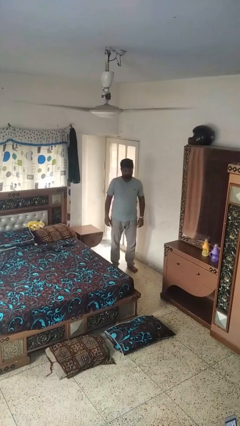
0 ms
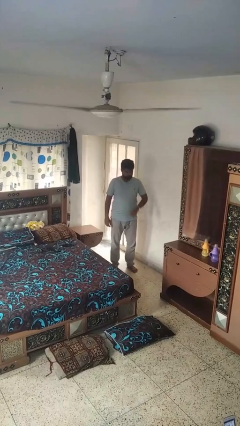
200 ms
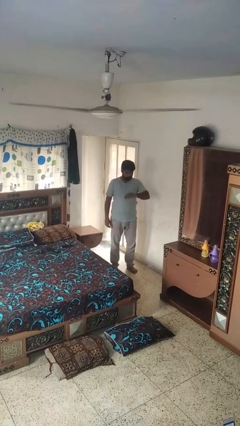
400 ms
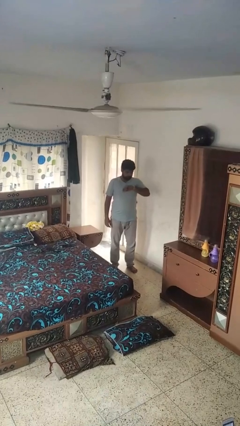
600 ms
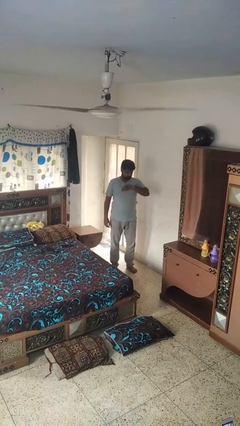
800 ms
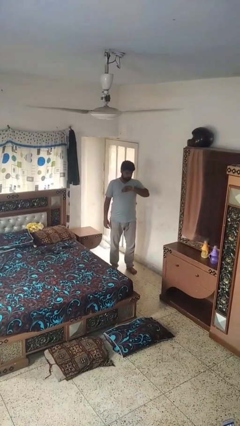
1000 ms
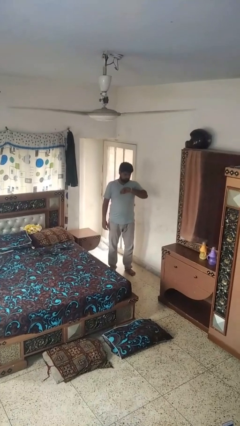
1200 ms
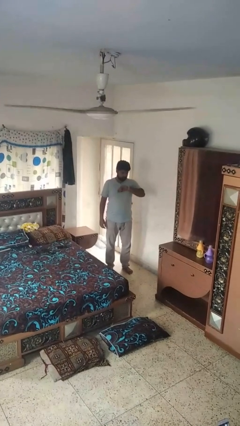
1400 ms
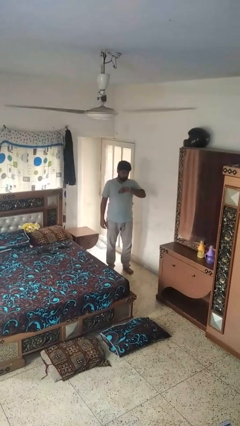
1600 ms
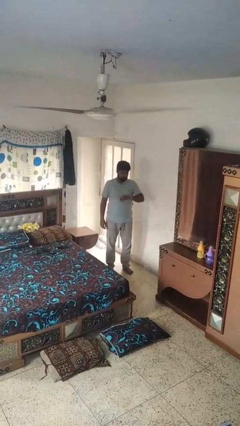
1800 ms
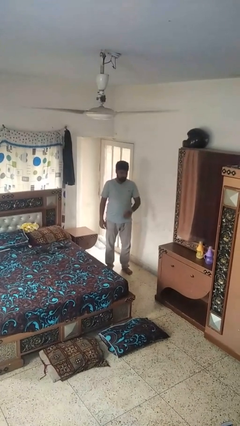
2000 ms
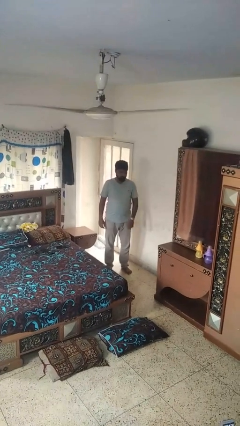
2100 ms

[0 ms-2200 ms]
person looks at wristwatch

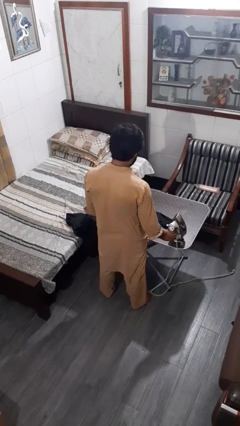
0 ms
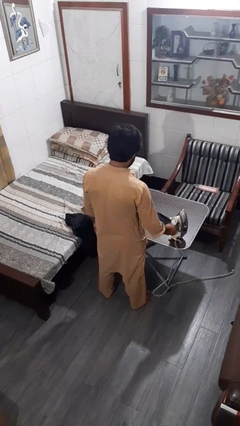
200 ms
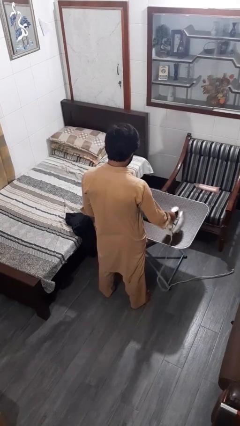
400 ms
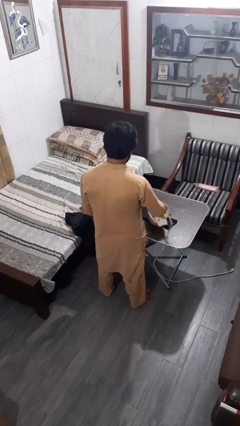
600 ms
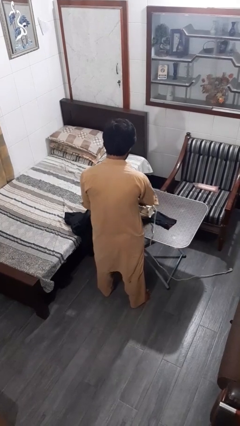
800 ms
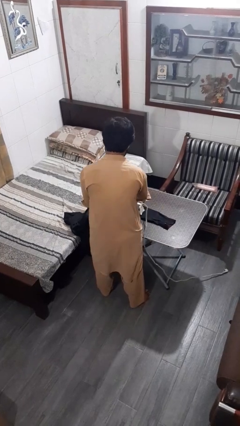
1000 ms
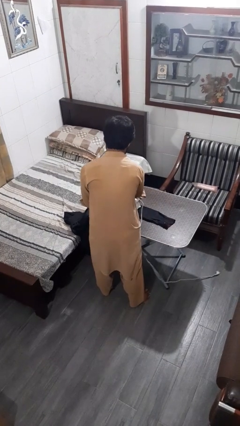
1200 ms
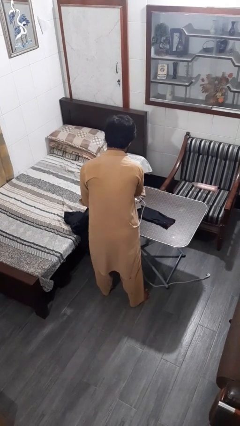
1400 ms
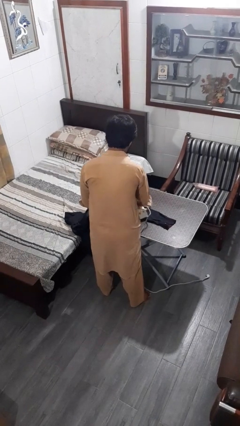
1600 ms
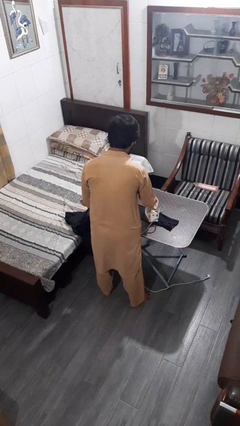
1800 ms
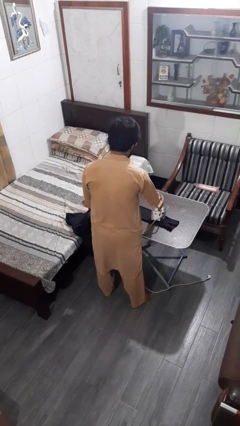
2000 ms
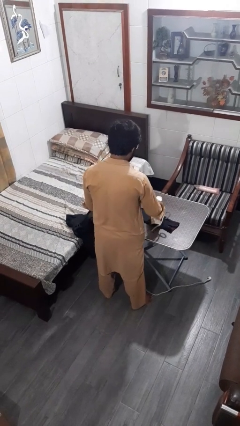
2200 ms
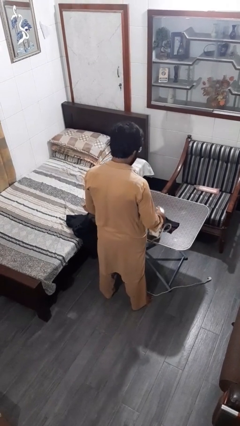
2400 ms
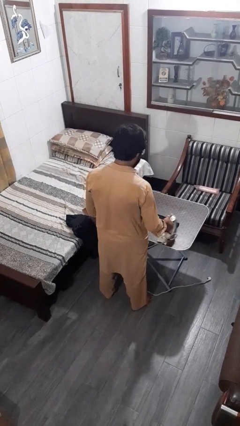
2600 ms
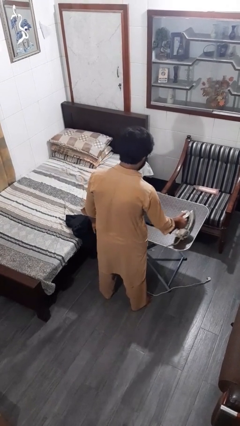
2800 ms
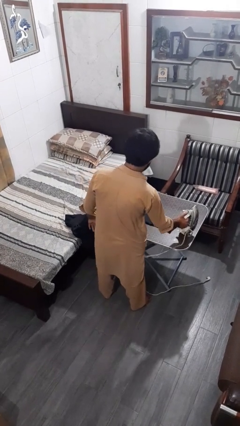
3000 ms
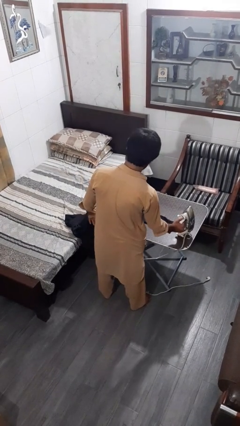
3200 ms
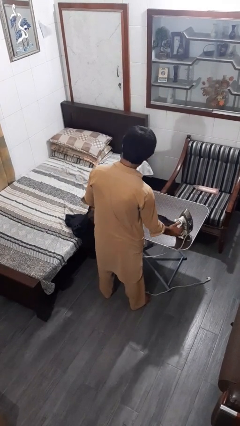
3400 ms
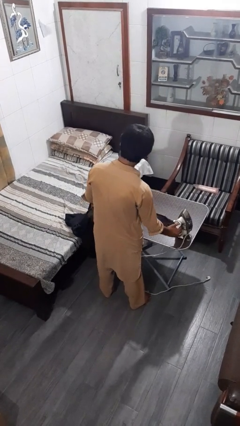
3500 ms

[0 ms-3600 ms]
person irons clothes

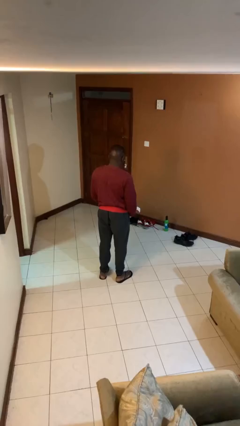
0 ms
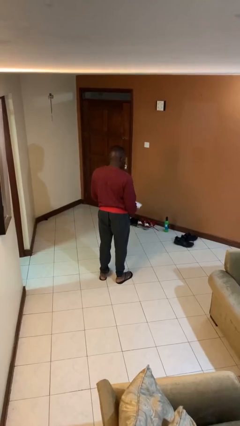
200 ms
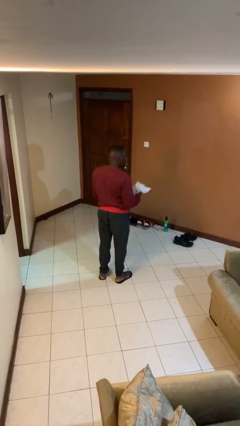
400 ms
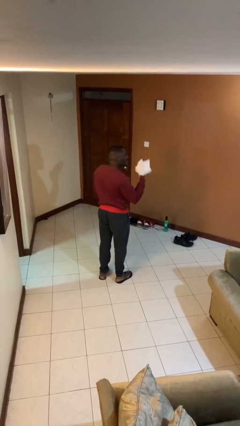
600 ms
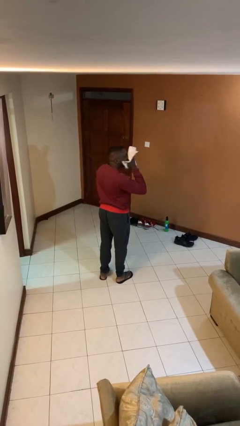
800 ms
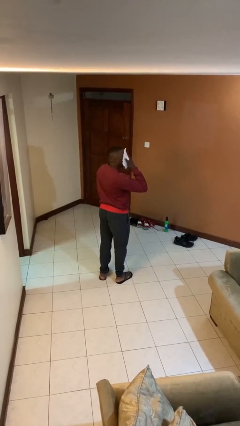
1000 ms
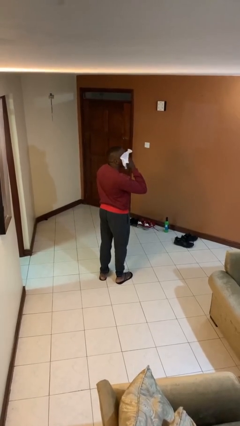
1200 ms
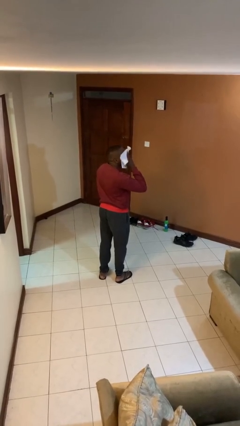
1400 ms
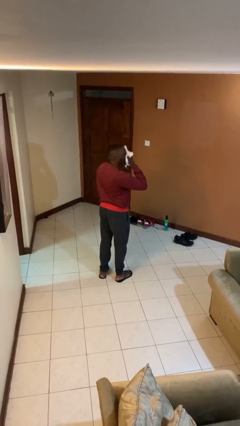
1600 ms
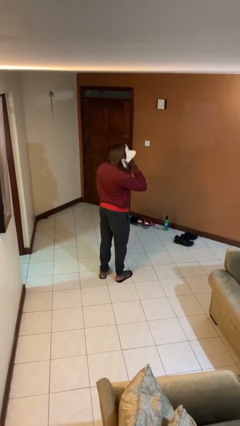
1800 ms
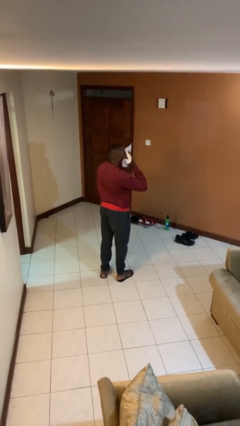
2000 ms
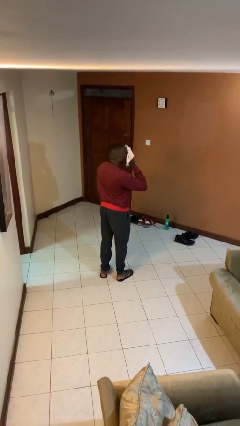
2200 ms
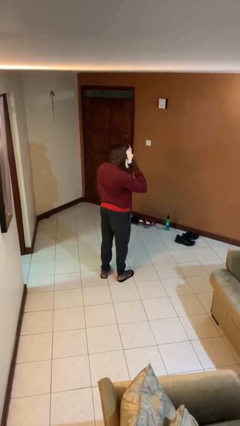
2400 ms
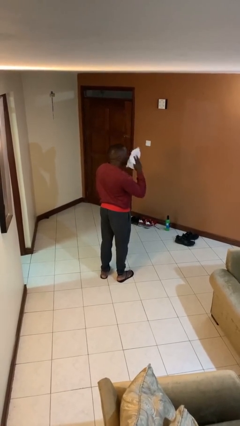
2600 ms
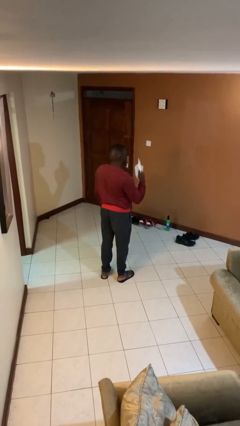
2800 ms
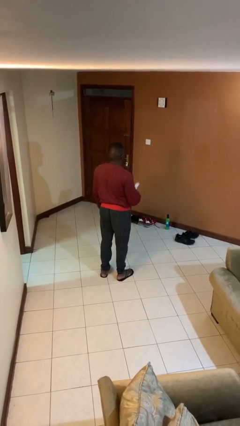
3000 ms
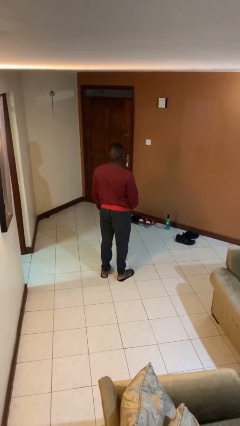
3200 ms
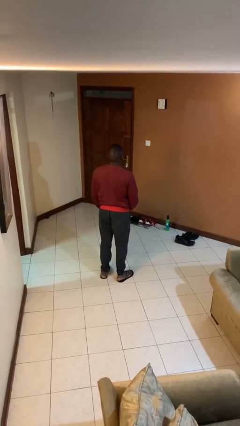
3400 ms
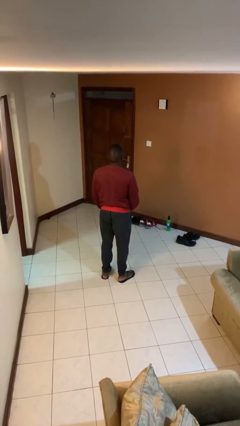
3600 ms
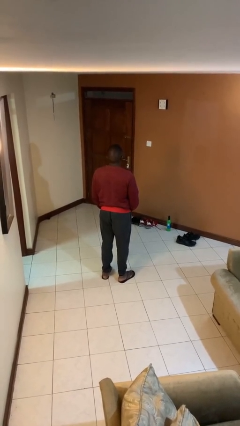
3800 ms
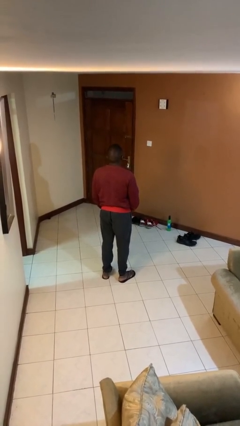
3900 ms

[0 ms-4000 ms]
person wipes mouth with napkin

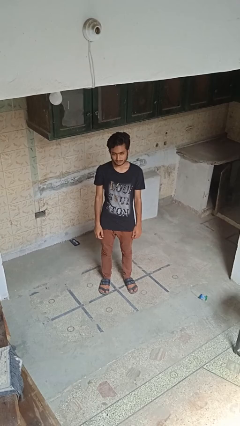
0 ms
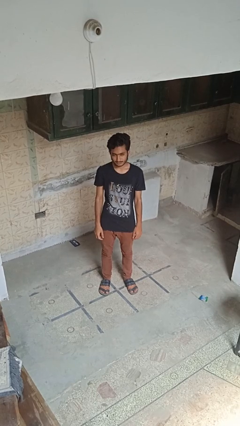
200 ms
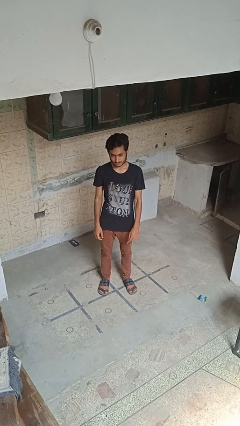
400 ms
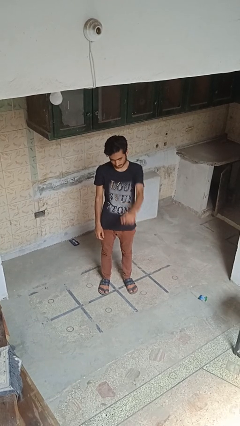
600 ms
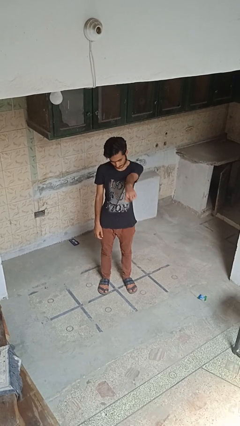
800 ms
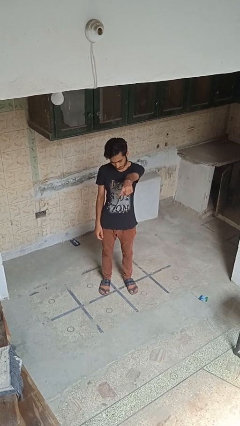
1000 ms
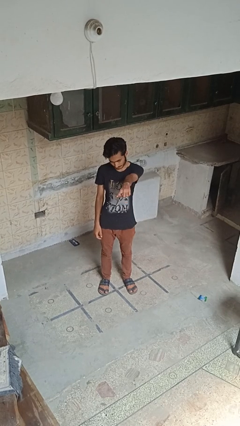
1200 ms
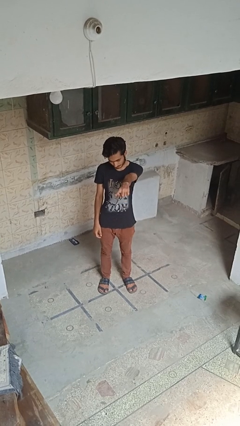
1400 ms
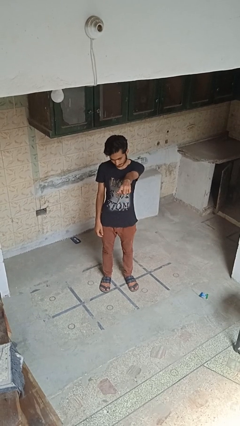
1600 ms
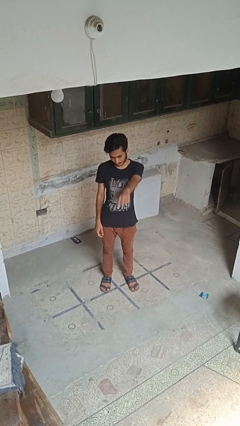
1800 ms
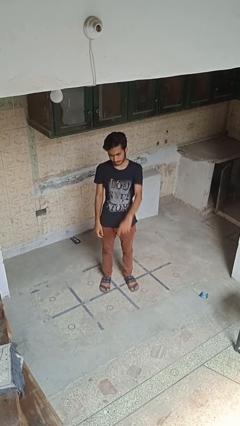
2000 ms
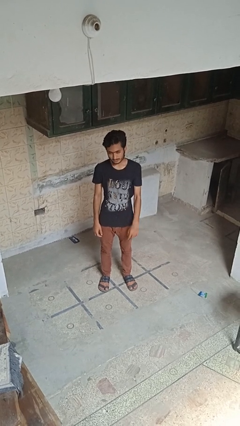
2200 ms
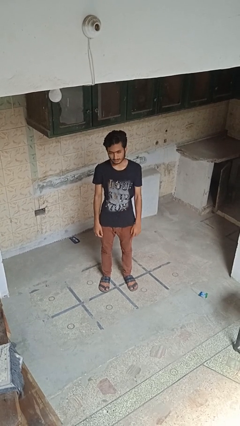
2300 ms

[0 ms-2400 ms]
person points at person

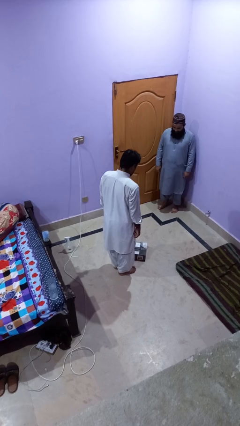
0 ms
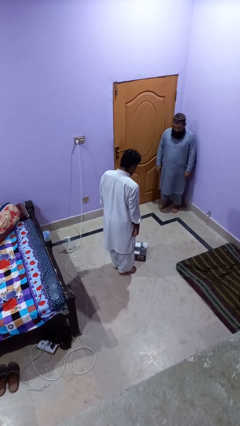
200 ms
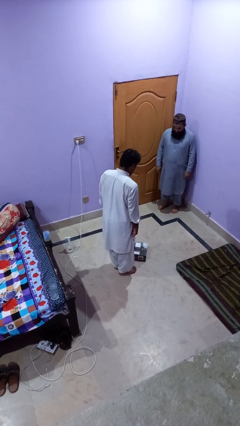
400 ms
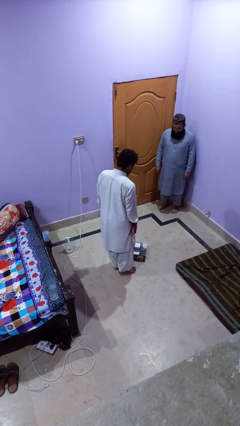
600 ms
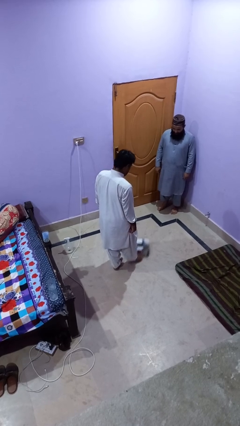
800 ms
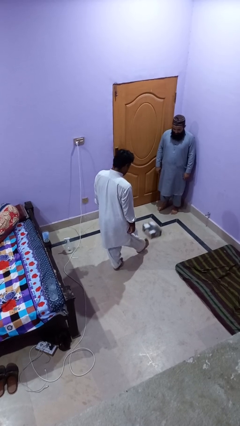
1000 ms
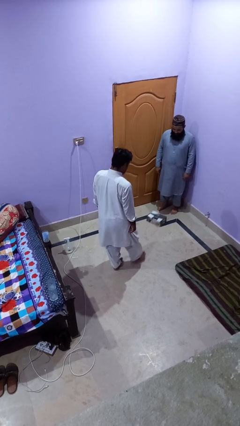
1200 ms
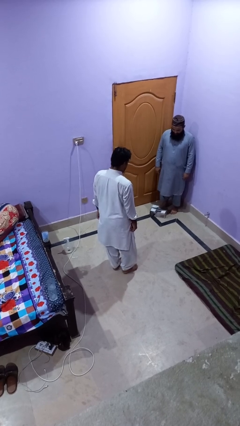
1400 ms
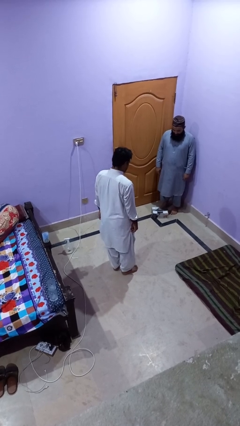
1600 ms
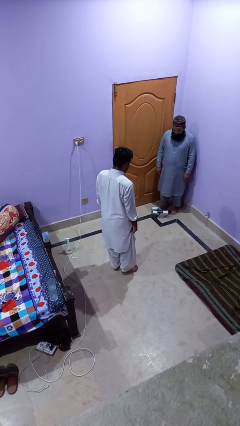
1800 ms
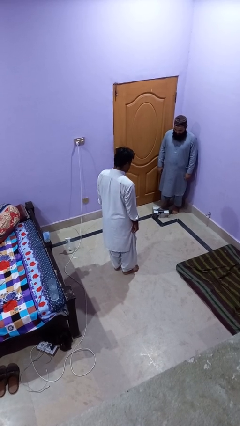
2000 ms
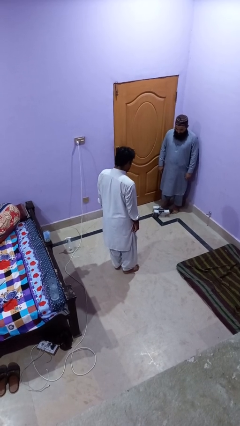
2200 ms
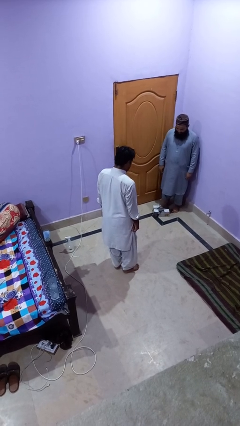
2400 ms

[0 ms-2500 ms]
person kicks object to person

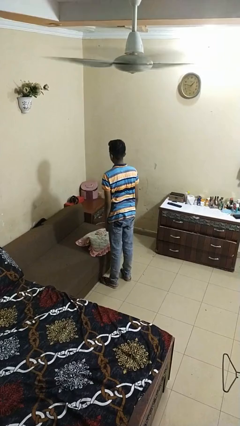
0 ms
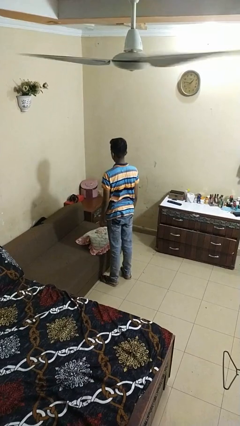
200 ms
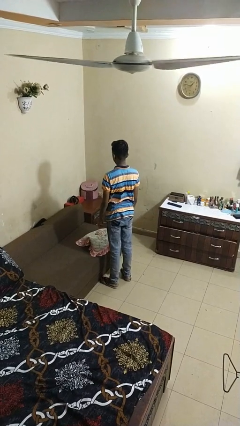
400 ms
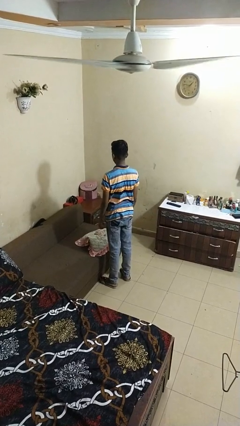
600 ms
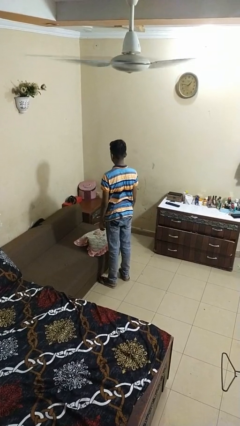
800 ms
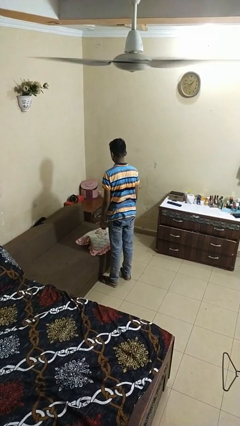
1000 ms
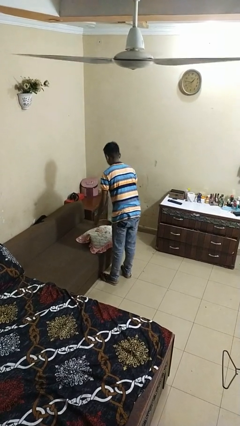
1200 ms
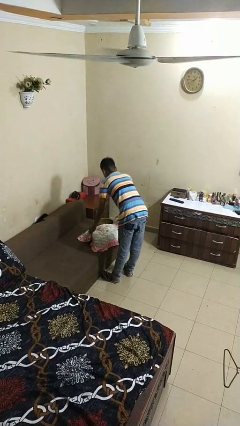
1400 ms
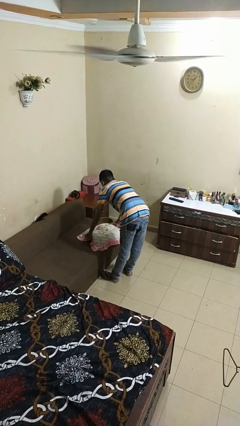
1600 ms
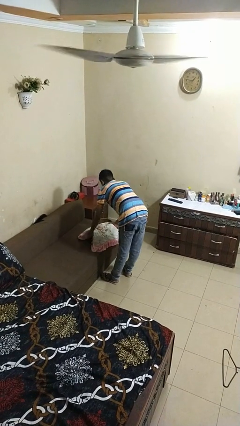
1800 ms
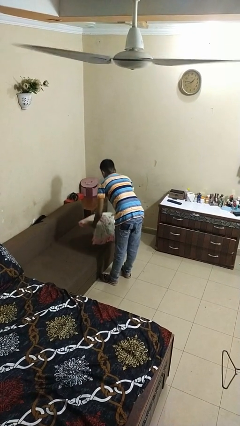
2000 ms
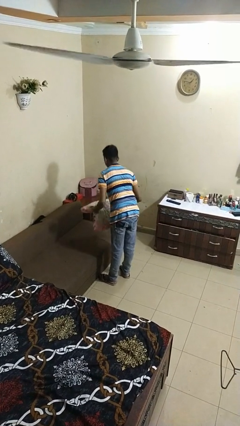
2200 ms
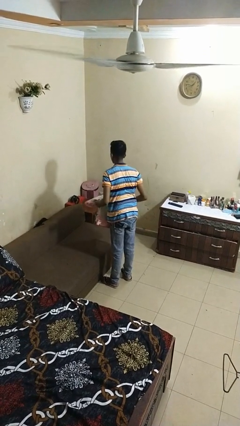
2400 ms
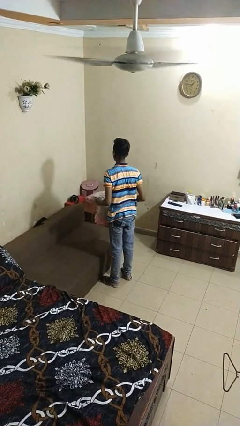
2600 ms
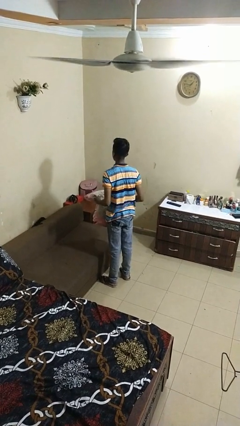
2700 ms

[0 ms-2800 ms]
person picks up object from couch

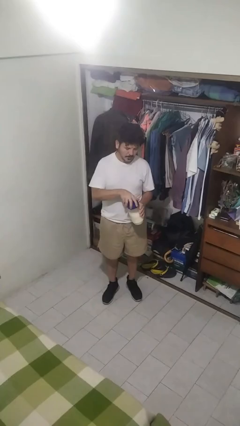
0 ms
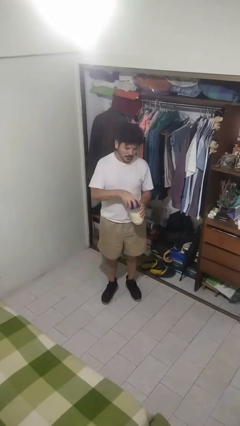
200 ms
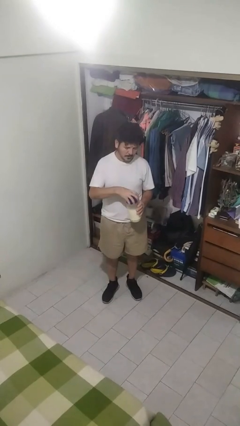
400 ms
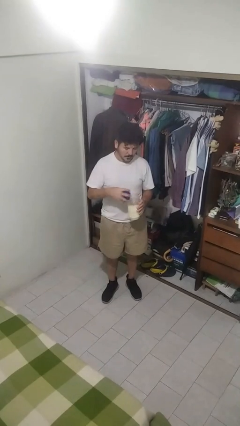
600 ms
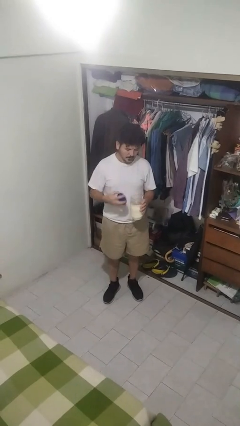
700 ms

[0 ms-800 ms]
person opens jar
